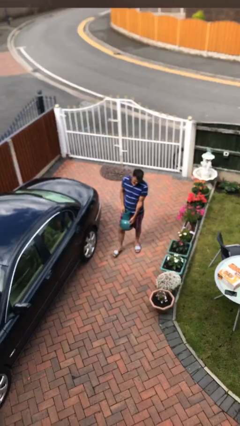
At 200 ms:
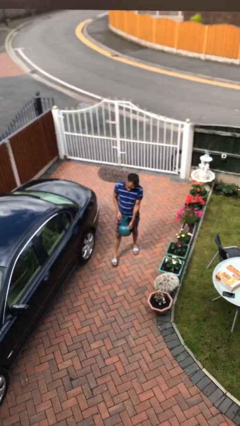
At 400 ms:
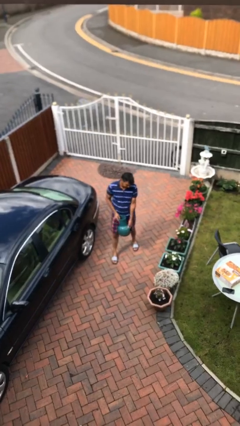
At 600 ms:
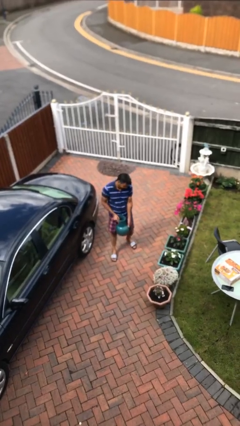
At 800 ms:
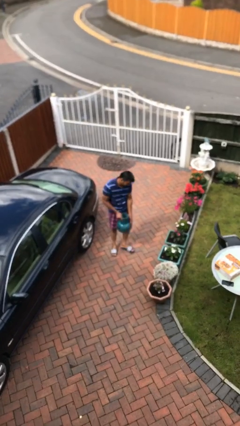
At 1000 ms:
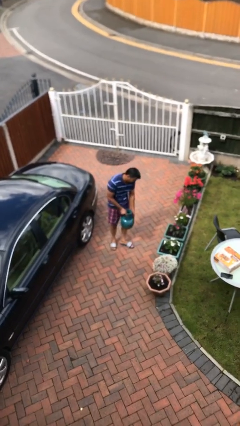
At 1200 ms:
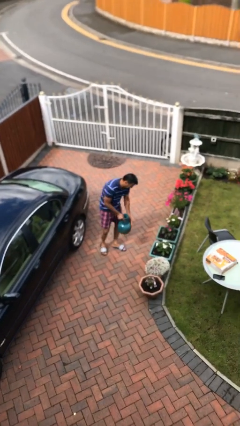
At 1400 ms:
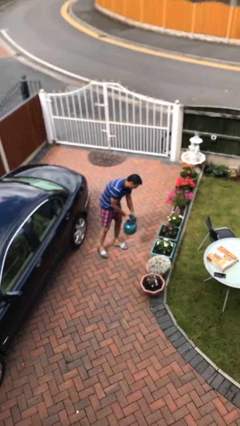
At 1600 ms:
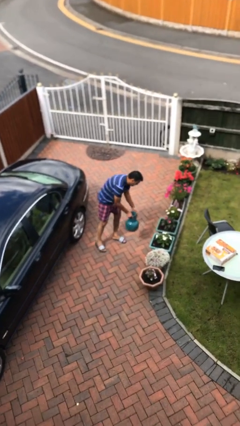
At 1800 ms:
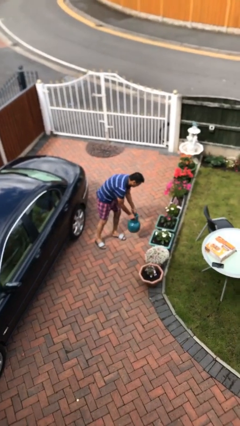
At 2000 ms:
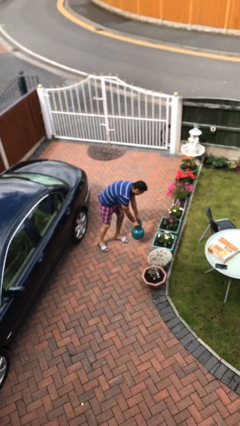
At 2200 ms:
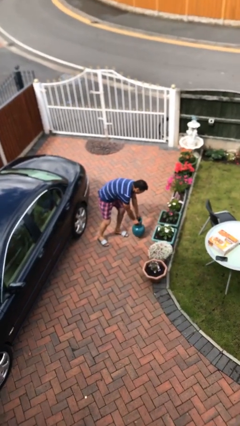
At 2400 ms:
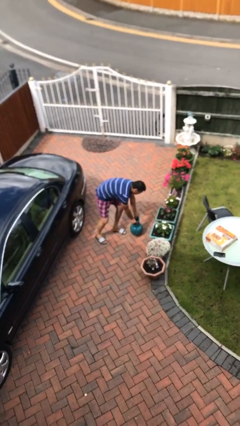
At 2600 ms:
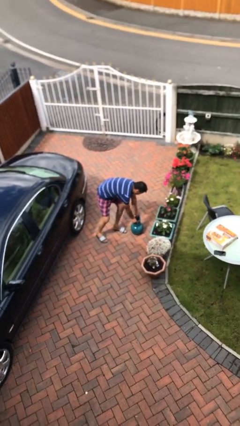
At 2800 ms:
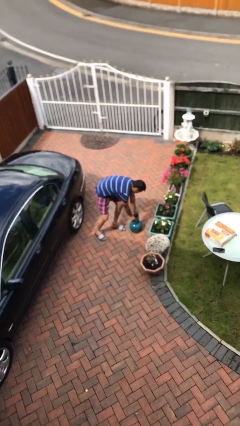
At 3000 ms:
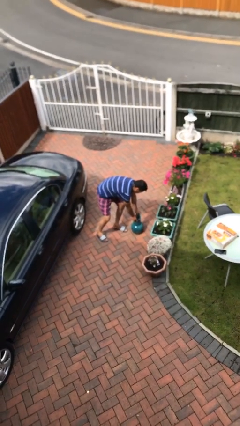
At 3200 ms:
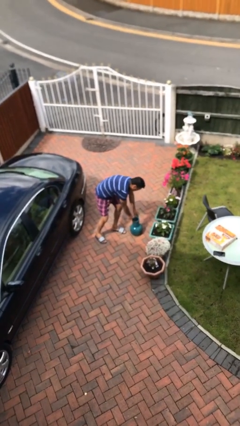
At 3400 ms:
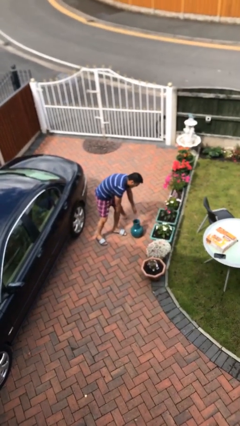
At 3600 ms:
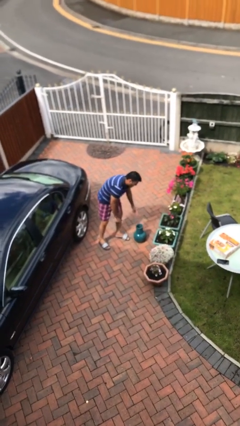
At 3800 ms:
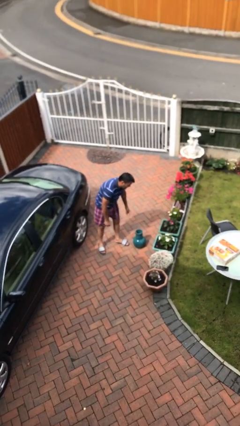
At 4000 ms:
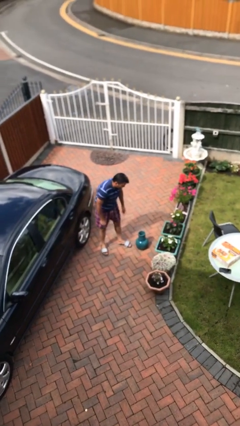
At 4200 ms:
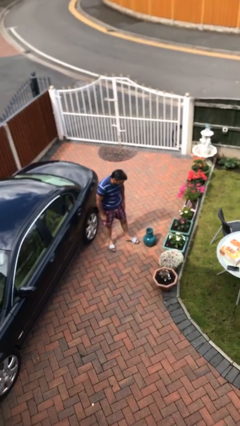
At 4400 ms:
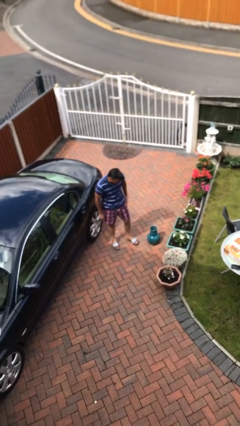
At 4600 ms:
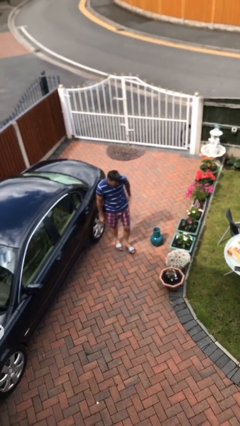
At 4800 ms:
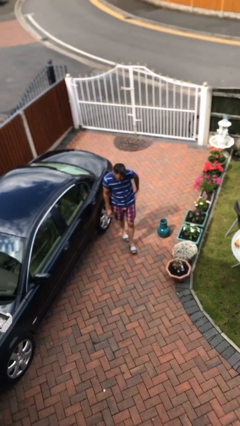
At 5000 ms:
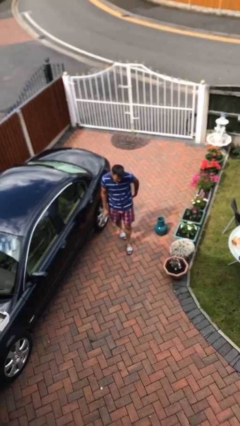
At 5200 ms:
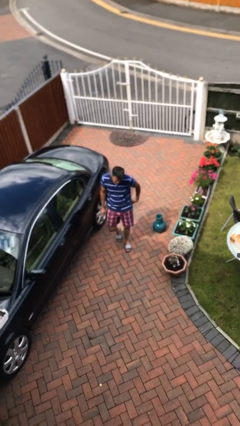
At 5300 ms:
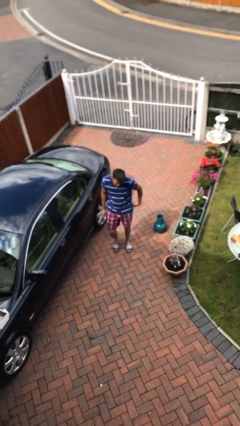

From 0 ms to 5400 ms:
person puts down object on floor

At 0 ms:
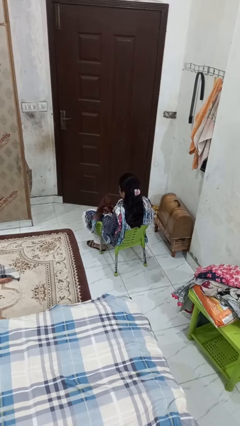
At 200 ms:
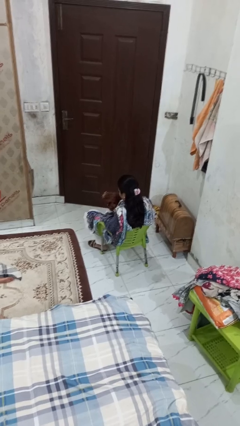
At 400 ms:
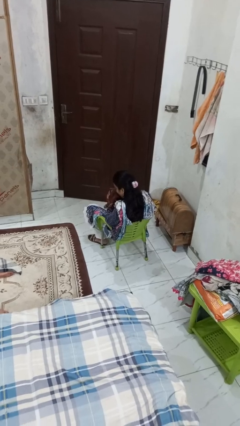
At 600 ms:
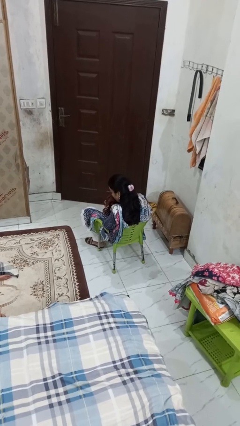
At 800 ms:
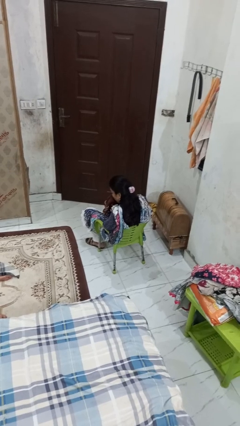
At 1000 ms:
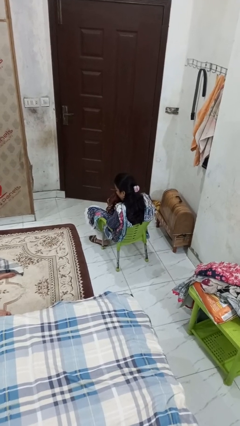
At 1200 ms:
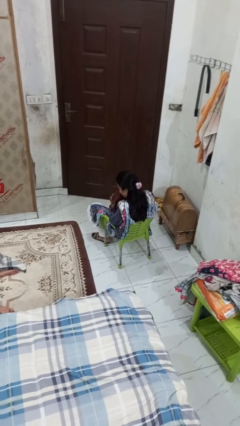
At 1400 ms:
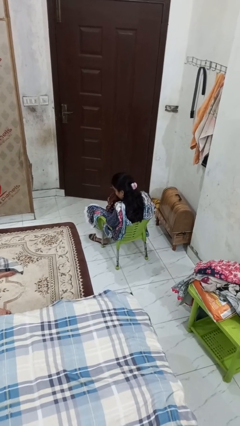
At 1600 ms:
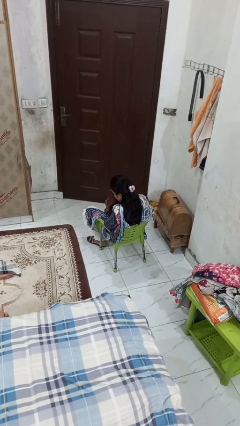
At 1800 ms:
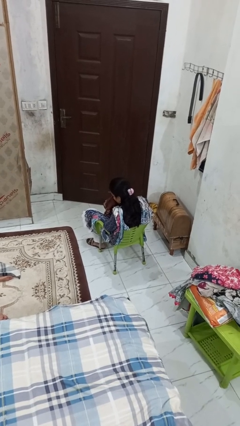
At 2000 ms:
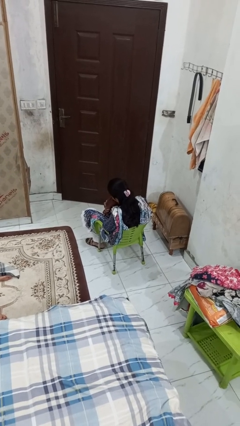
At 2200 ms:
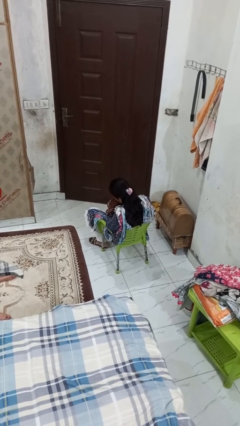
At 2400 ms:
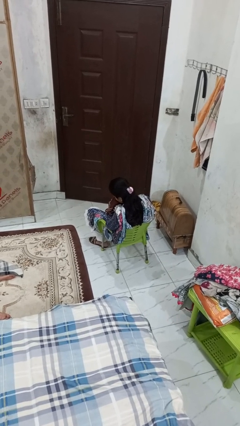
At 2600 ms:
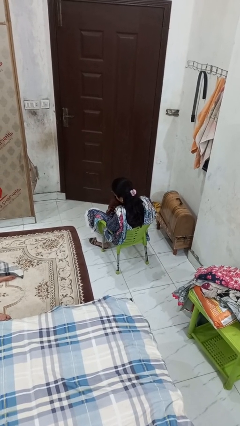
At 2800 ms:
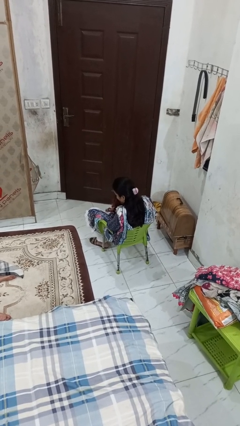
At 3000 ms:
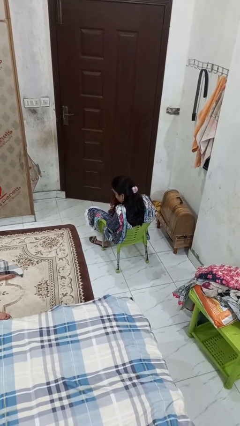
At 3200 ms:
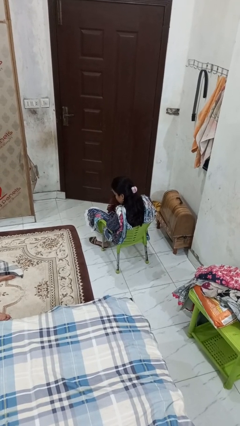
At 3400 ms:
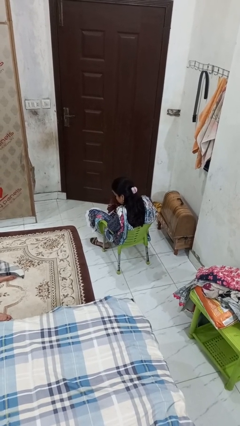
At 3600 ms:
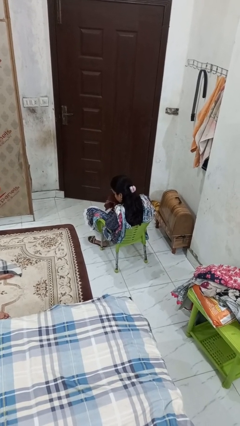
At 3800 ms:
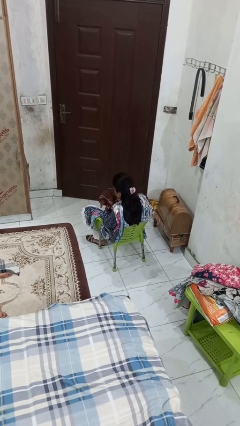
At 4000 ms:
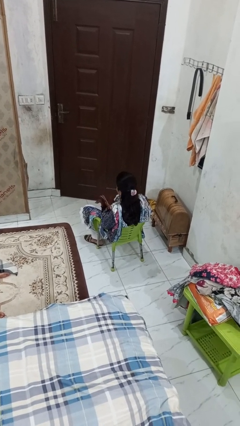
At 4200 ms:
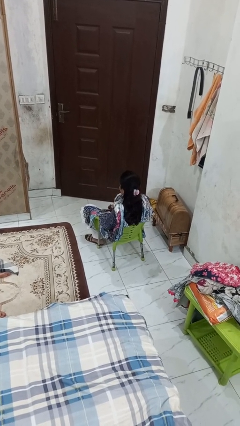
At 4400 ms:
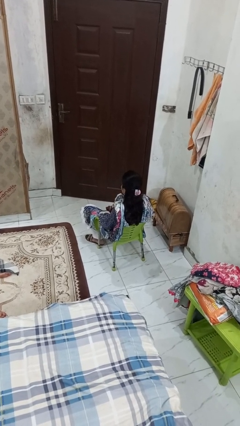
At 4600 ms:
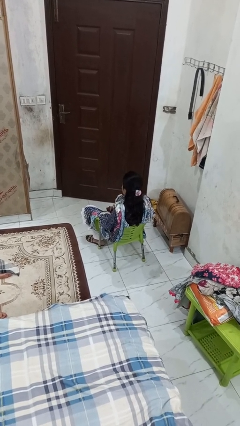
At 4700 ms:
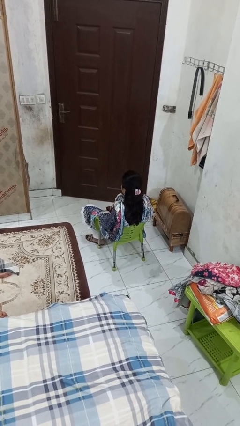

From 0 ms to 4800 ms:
person blows nose

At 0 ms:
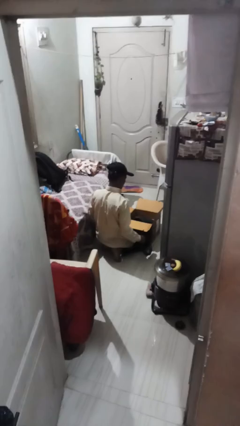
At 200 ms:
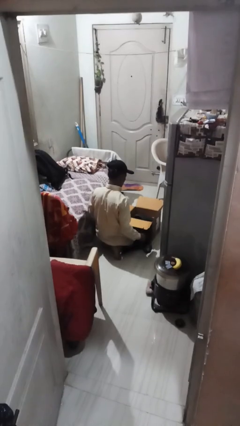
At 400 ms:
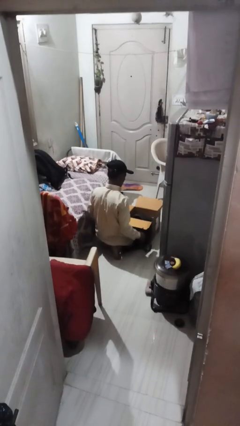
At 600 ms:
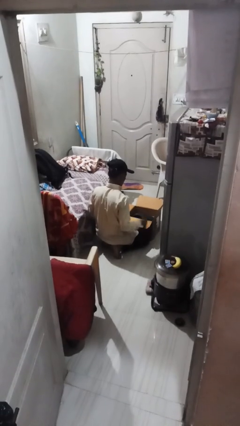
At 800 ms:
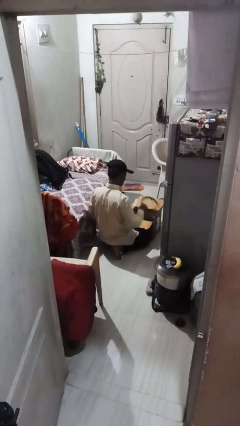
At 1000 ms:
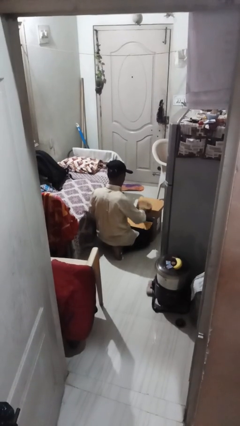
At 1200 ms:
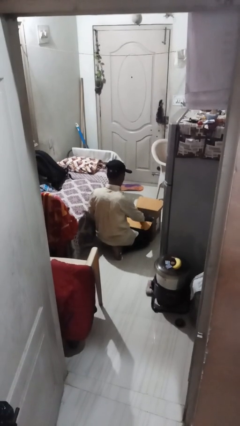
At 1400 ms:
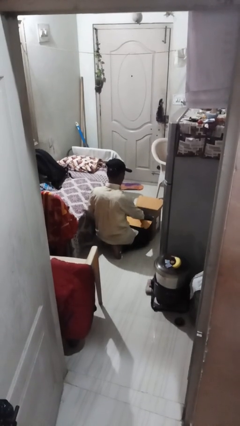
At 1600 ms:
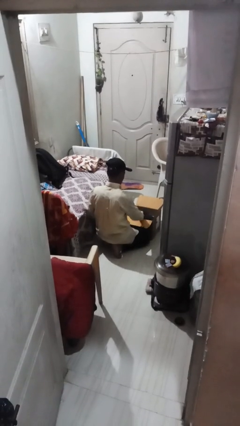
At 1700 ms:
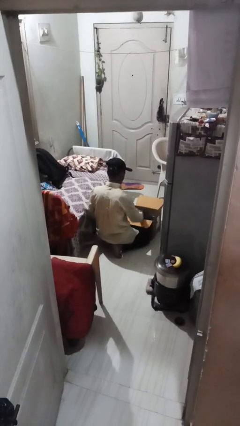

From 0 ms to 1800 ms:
person puts object into box

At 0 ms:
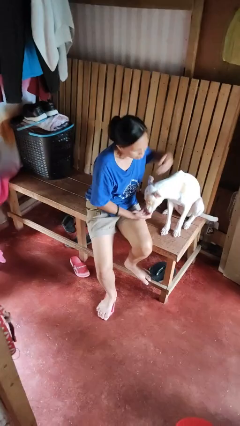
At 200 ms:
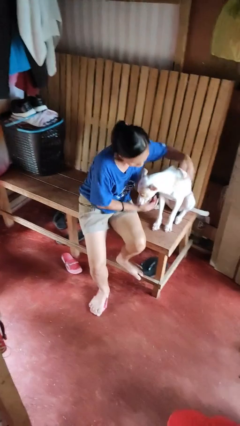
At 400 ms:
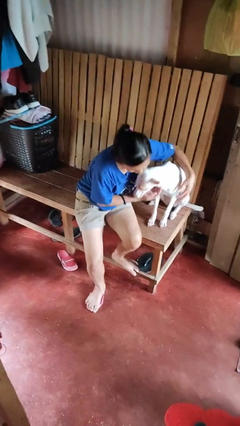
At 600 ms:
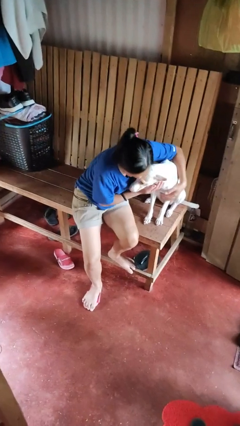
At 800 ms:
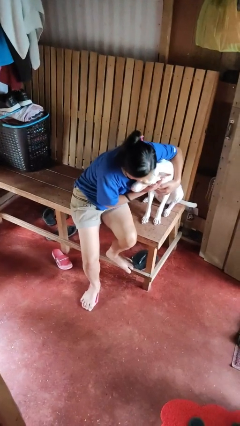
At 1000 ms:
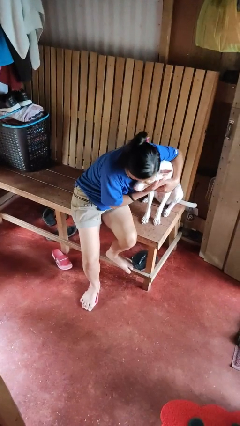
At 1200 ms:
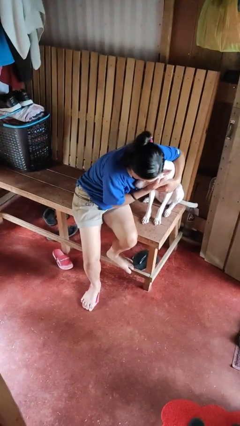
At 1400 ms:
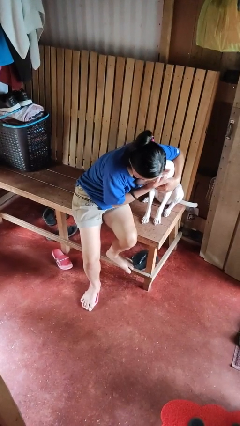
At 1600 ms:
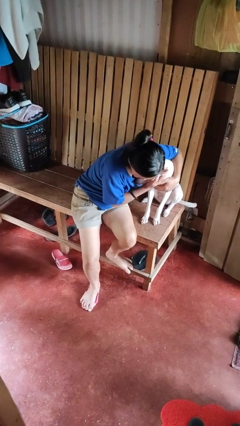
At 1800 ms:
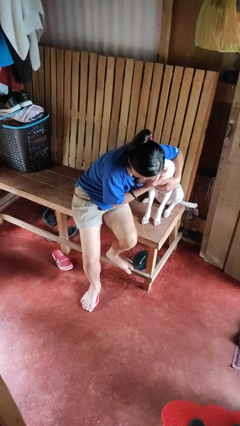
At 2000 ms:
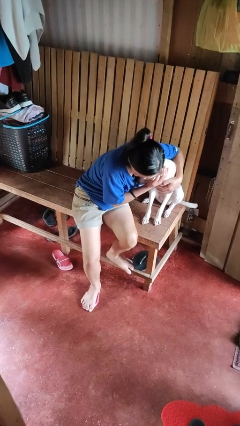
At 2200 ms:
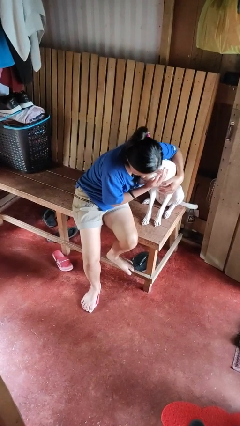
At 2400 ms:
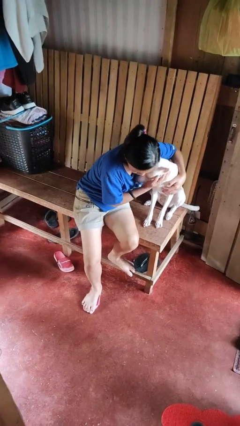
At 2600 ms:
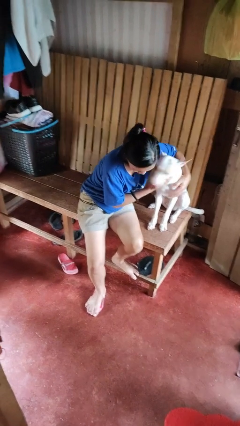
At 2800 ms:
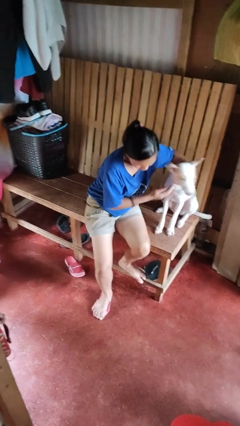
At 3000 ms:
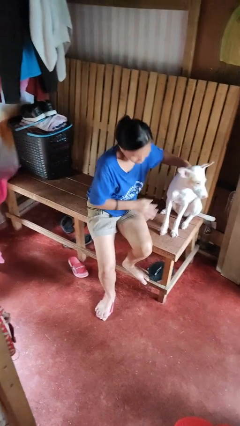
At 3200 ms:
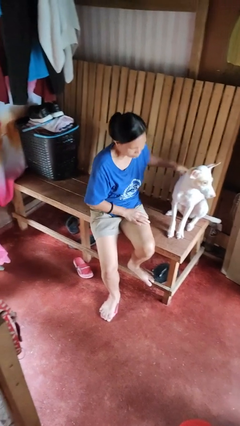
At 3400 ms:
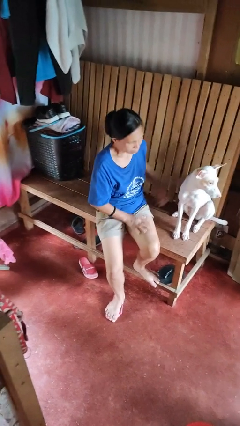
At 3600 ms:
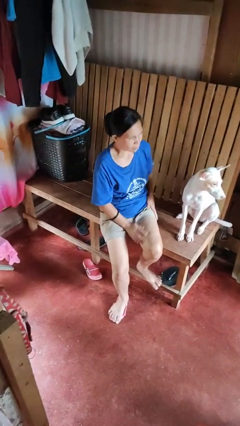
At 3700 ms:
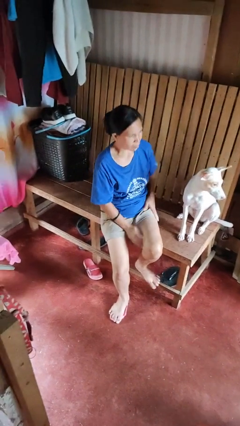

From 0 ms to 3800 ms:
person hugs dog

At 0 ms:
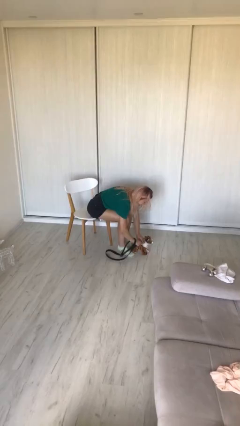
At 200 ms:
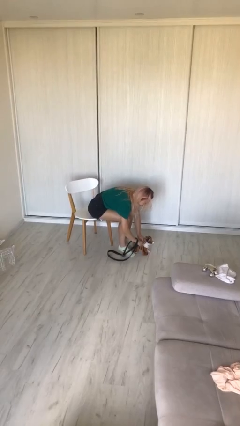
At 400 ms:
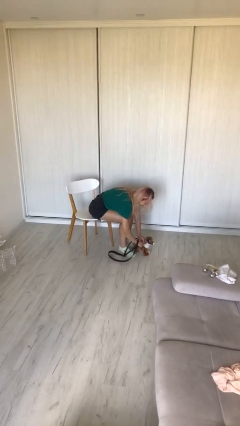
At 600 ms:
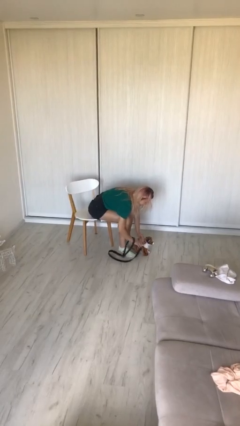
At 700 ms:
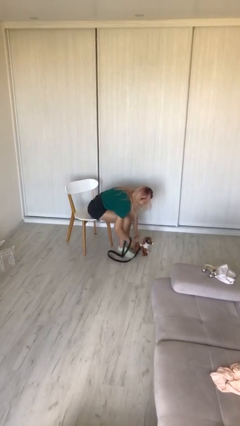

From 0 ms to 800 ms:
person attaches leash to dog

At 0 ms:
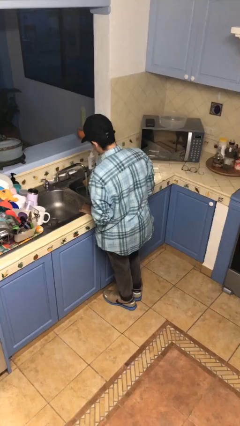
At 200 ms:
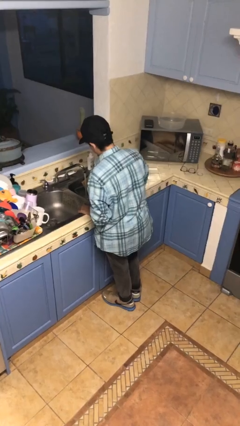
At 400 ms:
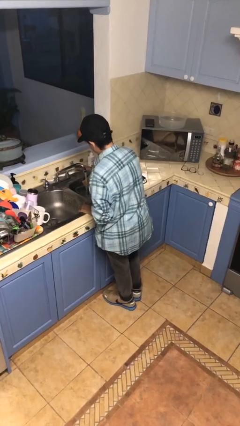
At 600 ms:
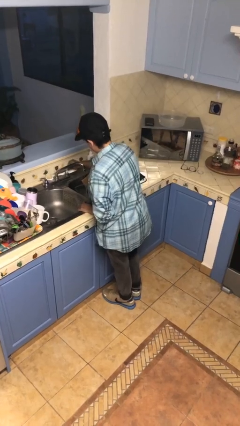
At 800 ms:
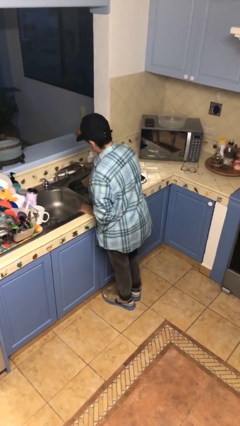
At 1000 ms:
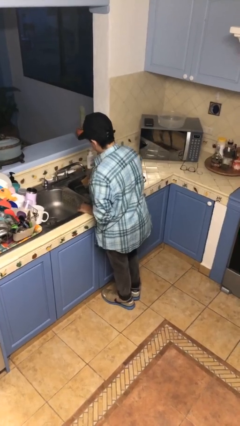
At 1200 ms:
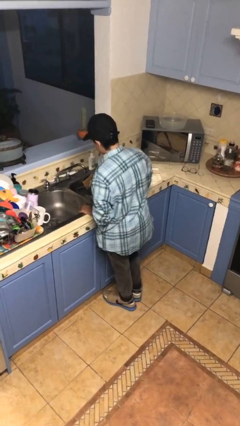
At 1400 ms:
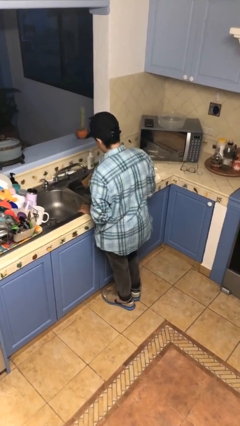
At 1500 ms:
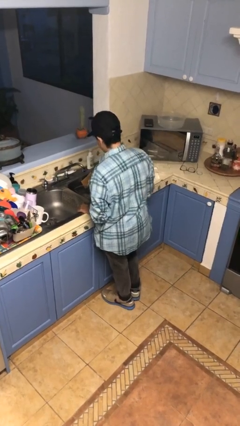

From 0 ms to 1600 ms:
person turns off faucet
